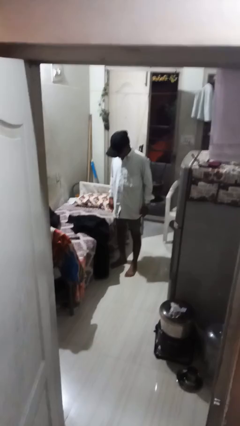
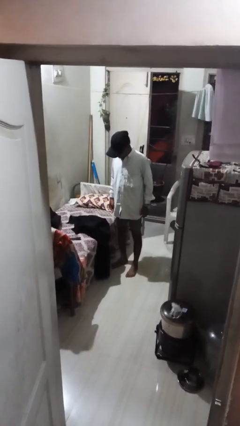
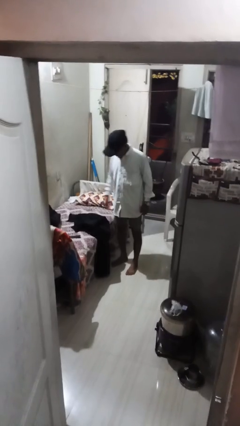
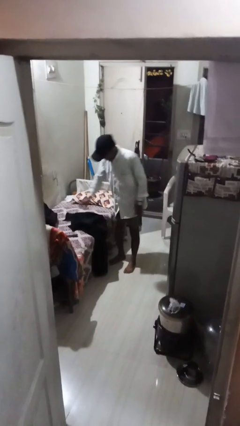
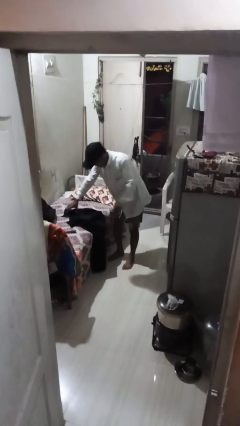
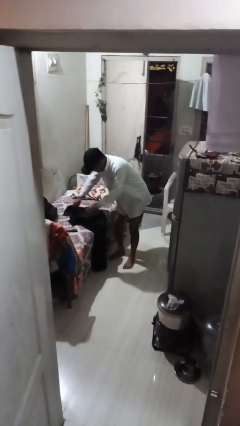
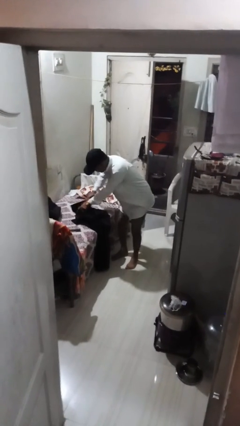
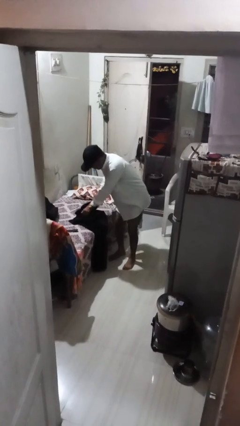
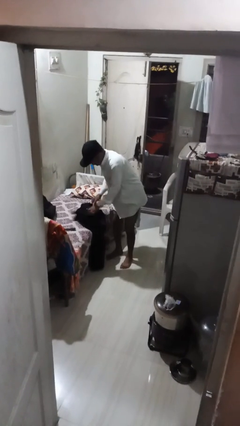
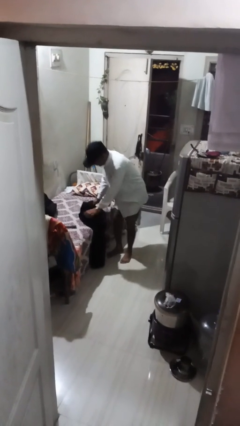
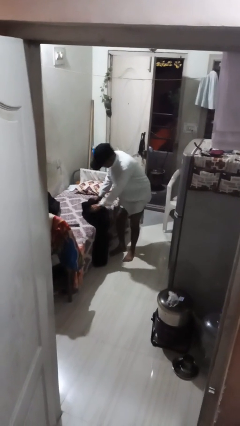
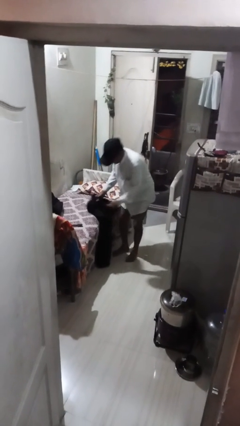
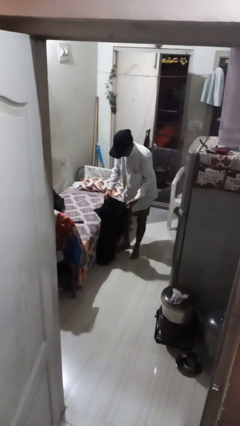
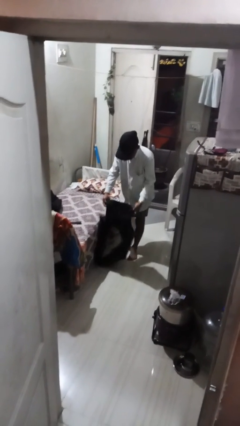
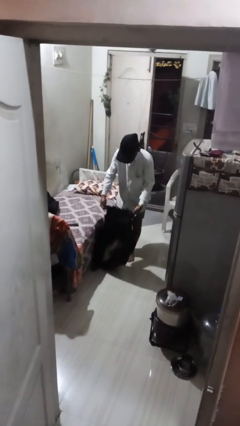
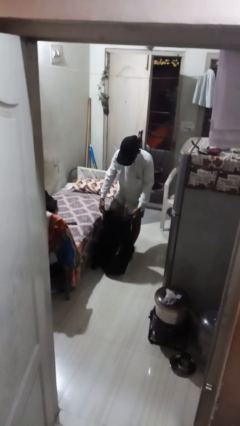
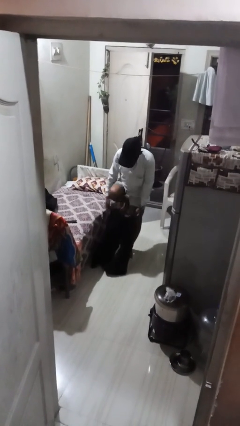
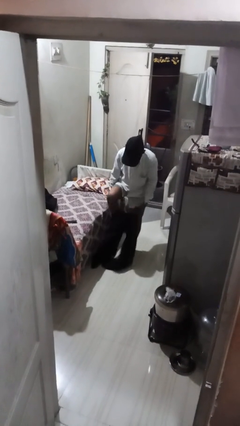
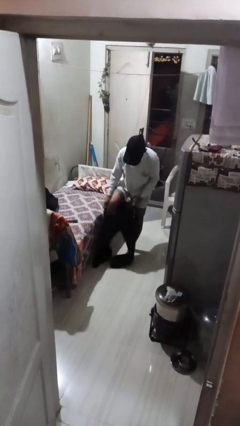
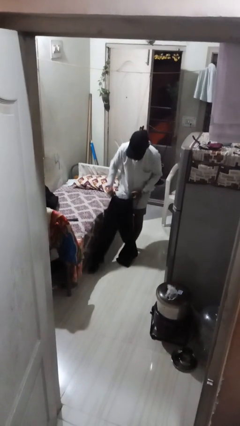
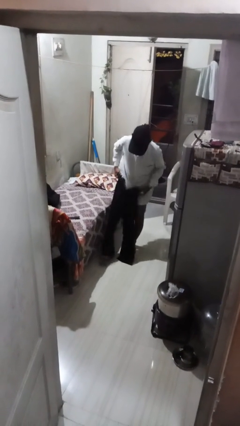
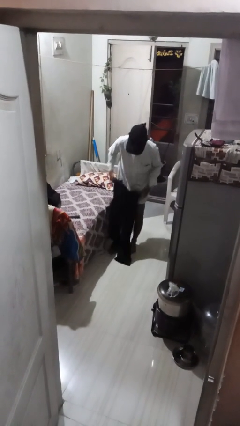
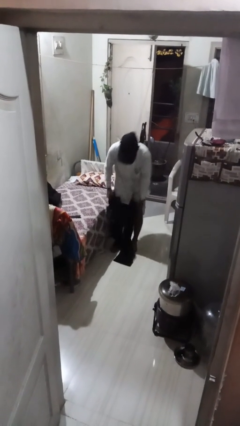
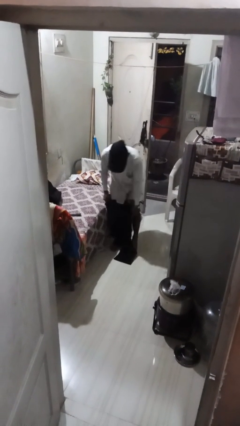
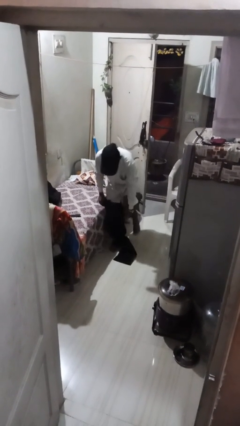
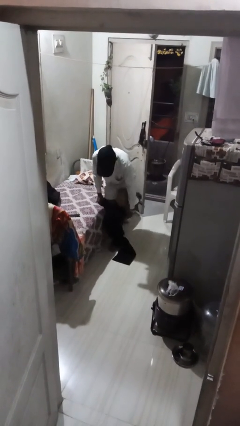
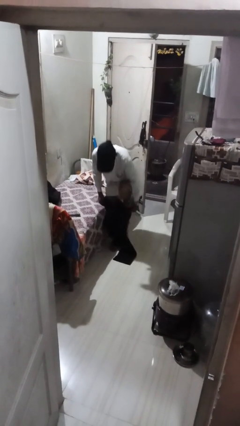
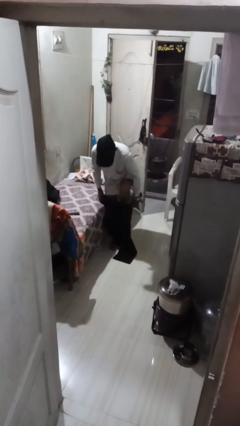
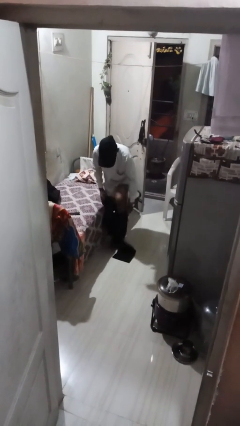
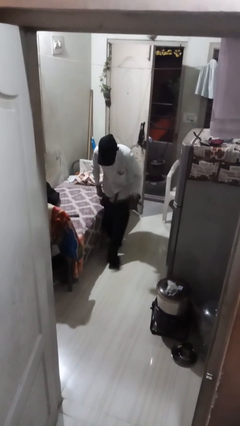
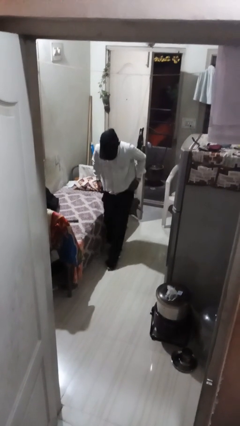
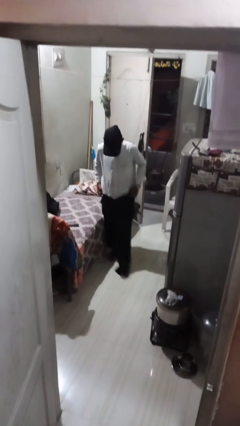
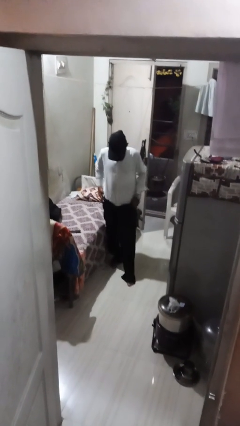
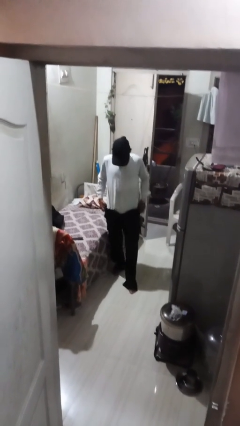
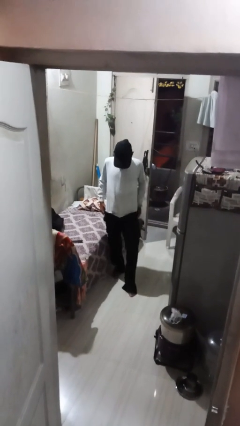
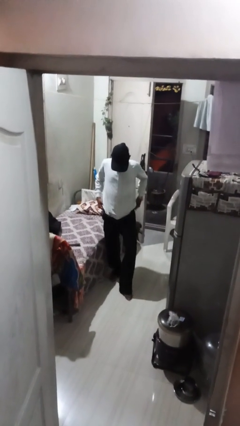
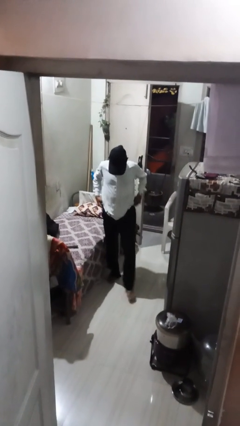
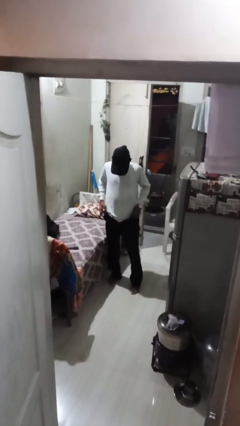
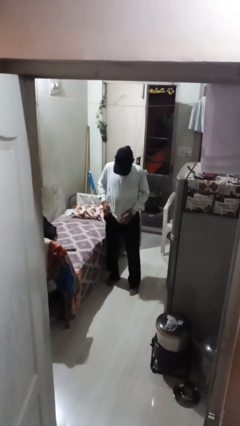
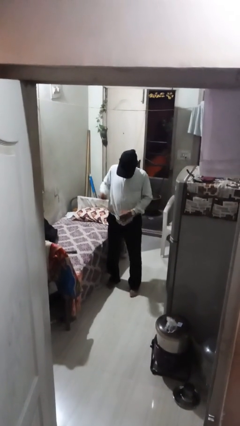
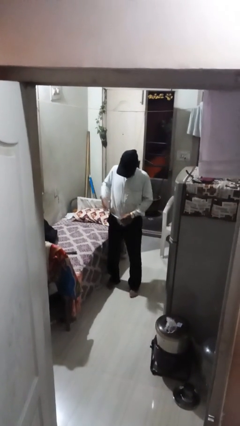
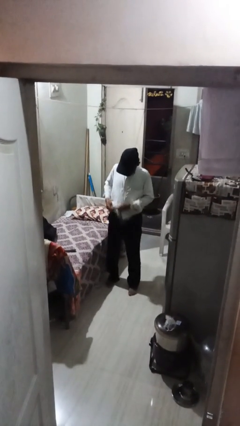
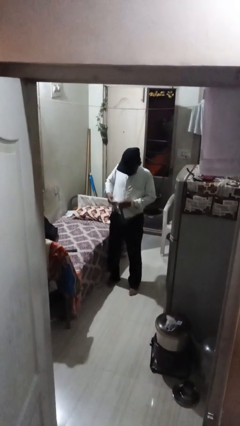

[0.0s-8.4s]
person puts on pants

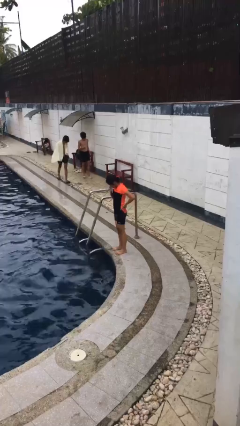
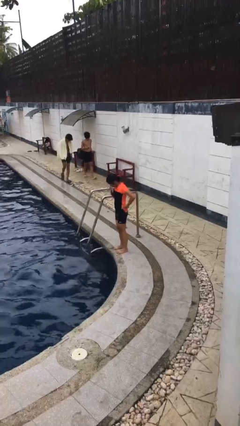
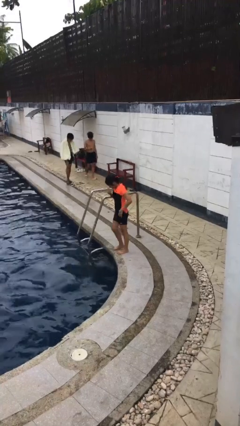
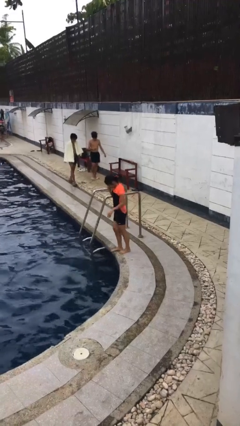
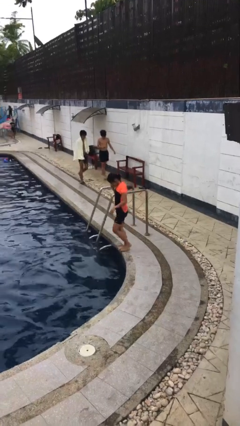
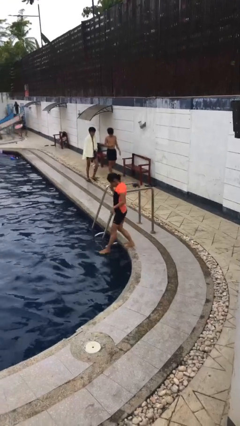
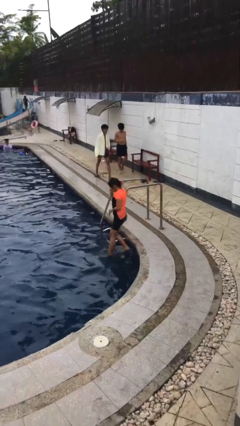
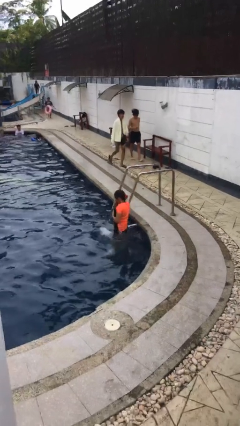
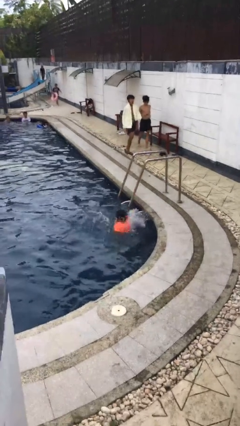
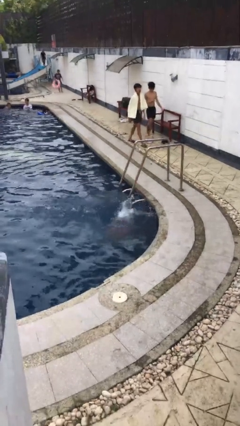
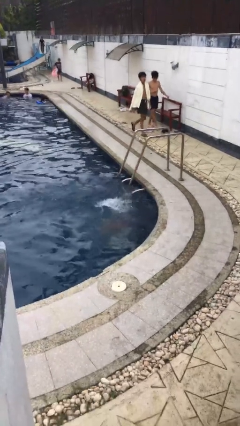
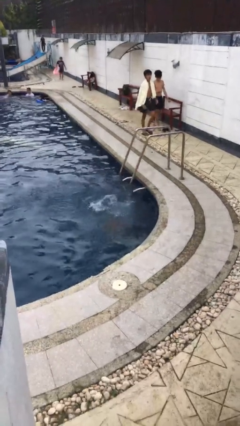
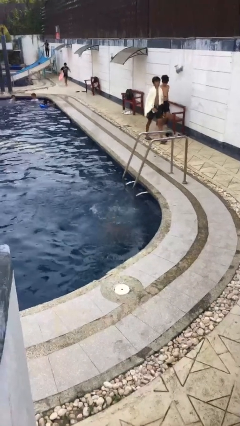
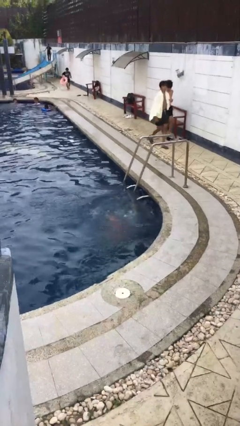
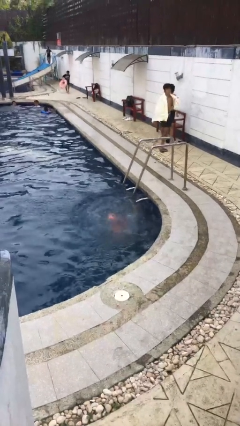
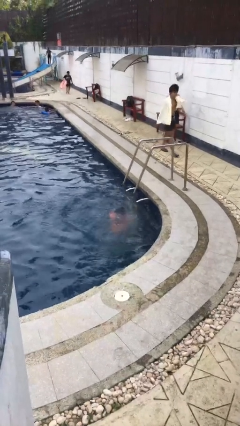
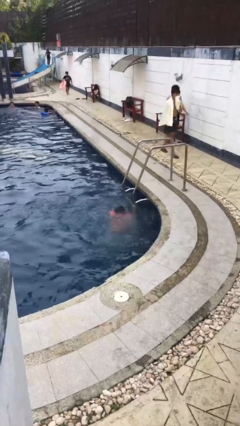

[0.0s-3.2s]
person jumps into pool

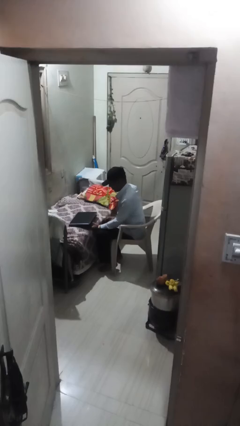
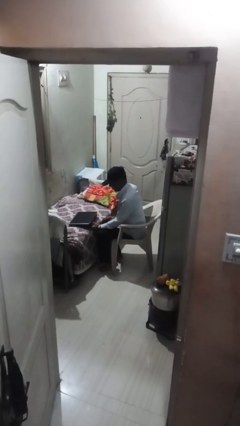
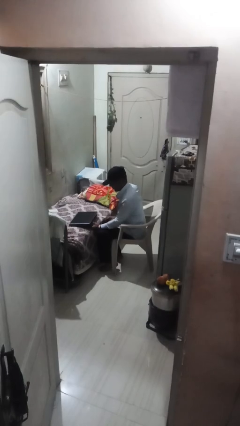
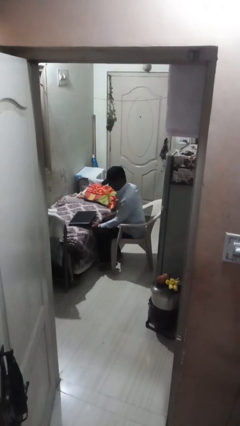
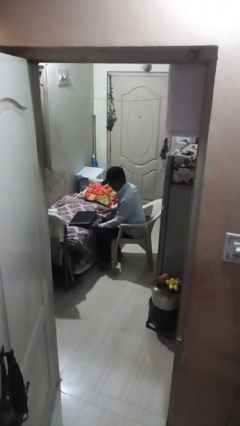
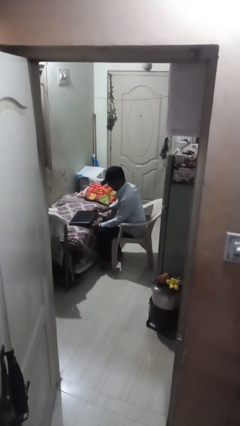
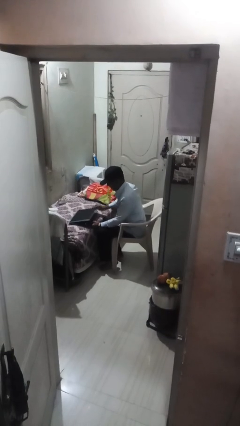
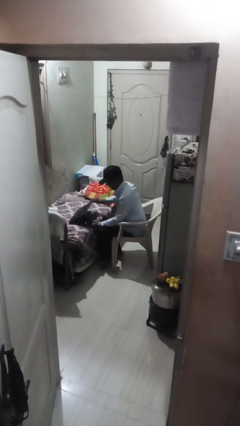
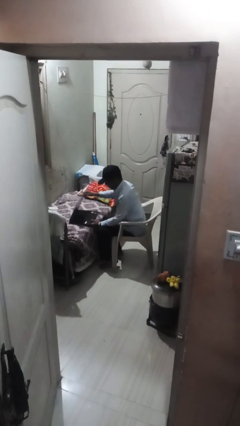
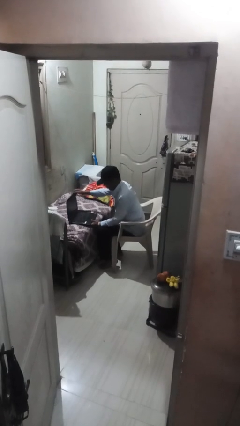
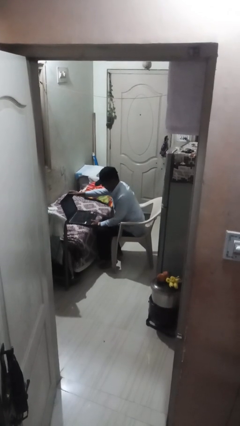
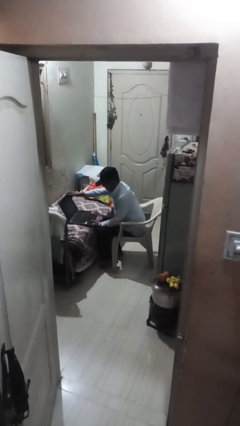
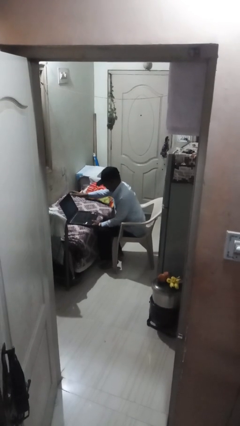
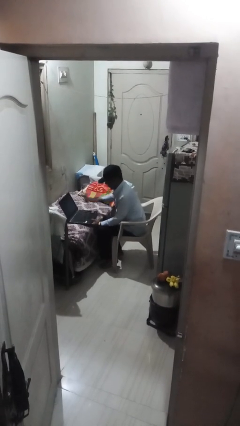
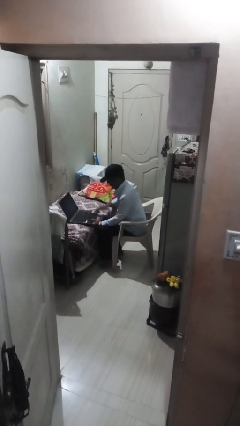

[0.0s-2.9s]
person opens laptop

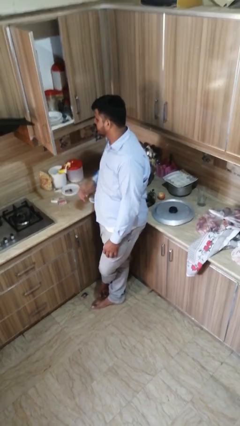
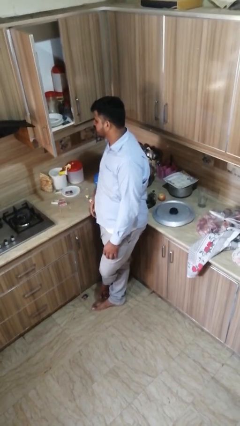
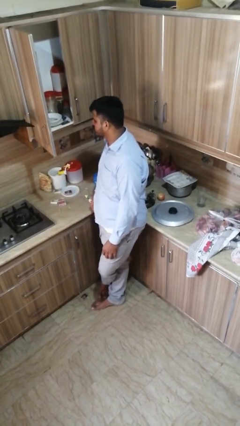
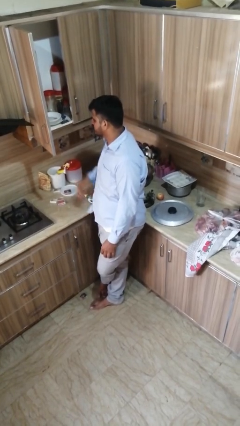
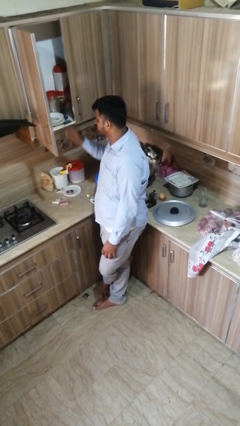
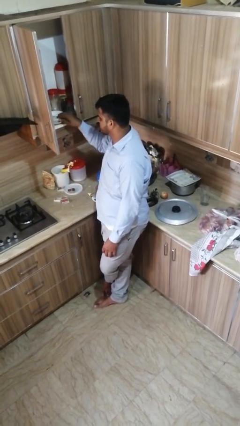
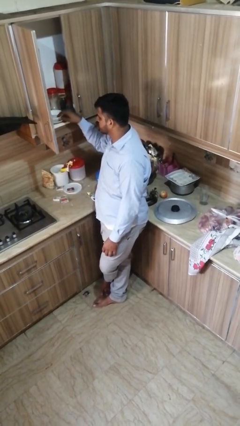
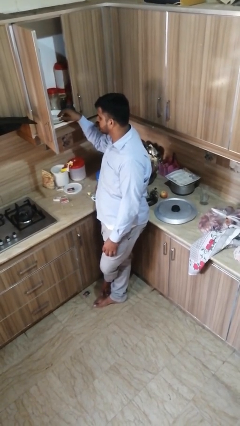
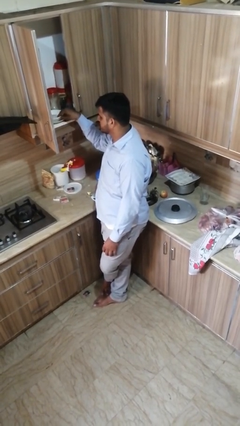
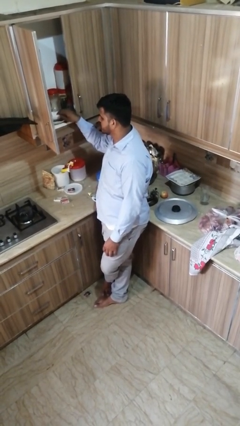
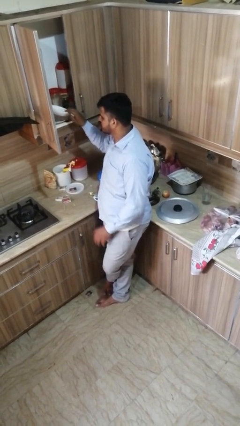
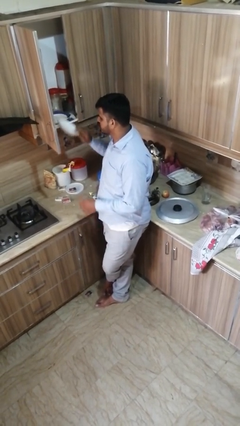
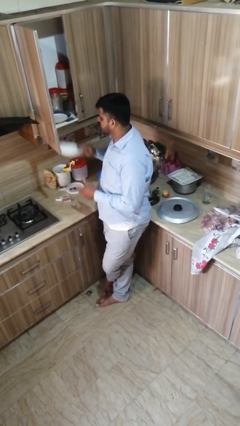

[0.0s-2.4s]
person takes object from cabinet

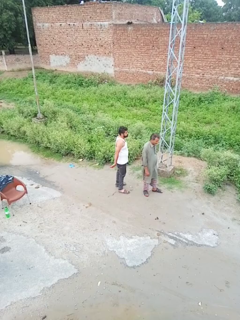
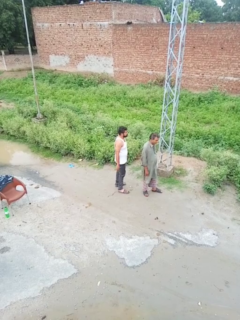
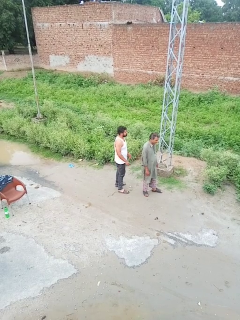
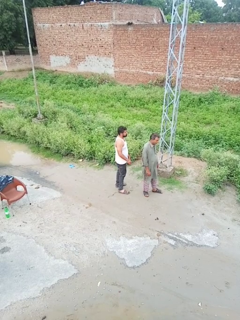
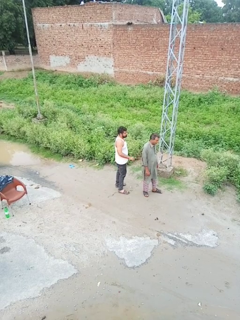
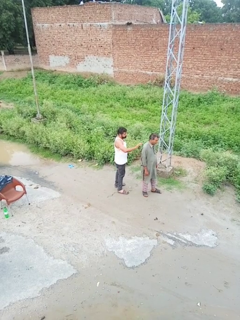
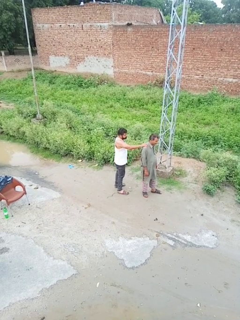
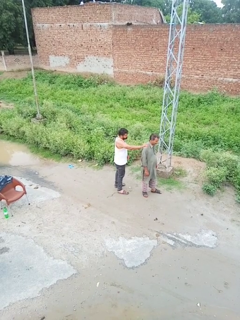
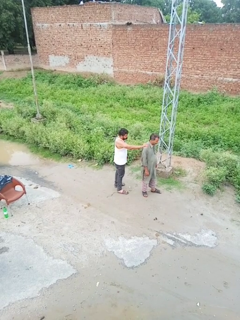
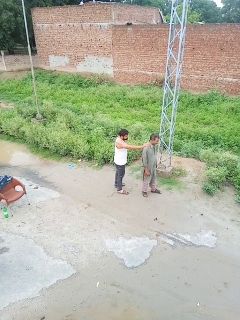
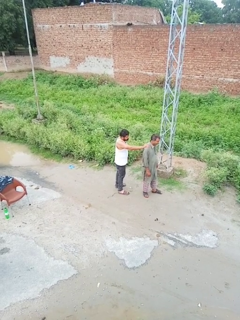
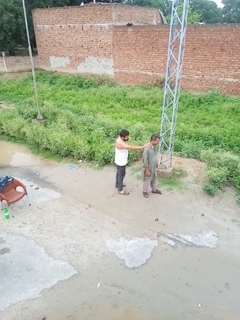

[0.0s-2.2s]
person grabs person by shoulder
